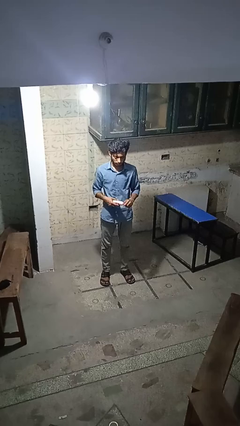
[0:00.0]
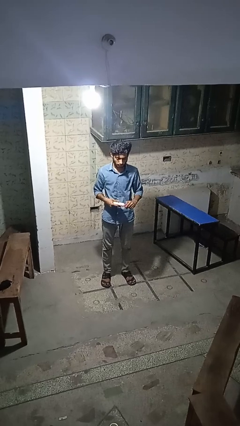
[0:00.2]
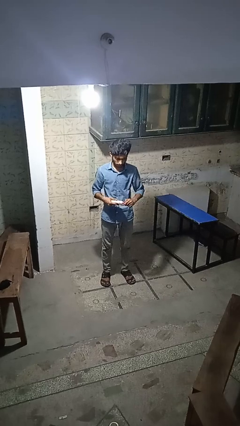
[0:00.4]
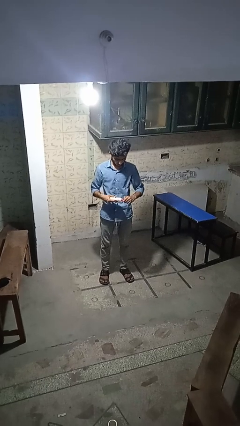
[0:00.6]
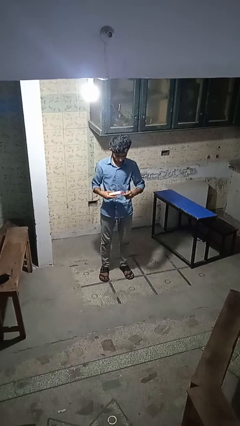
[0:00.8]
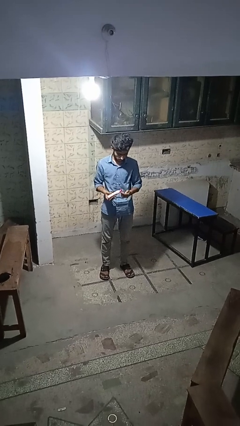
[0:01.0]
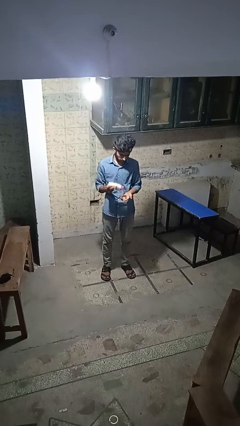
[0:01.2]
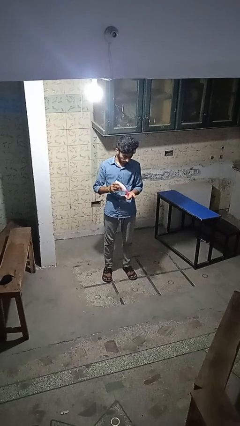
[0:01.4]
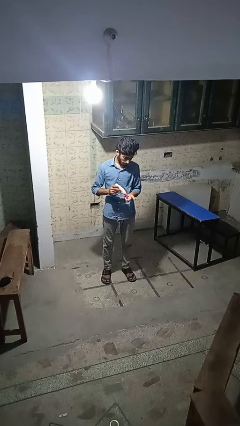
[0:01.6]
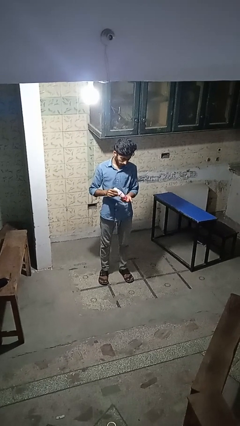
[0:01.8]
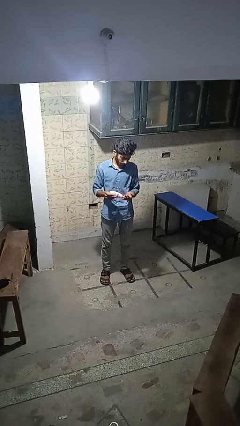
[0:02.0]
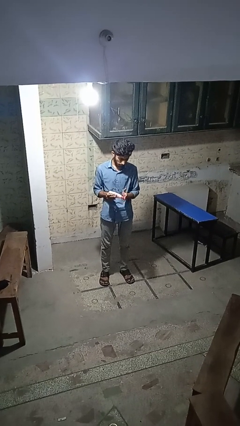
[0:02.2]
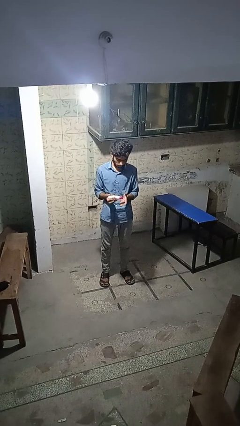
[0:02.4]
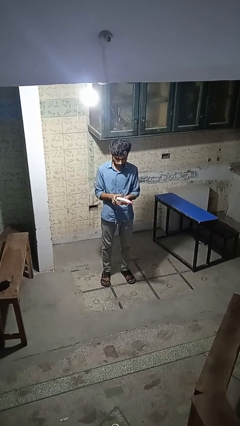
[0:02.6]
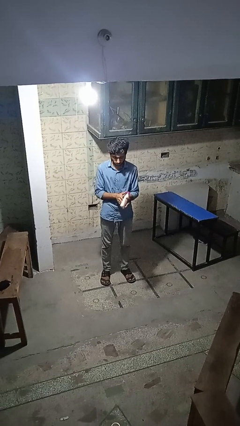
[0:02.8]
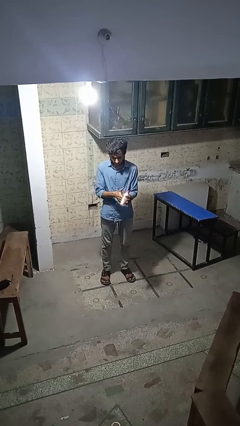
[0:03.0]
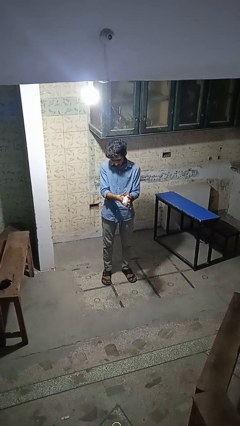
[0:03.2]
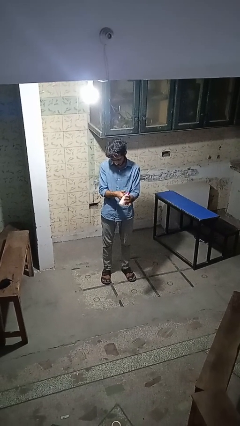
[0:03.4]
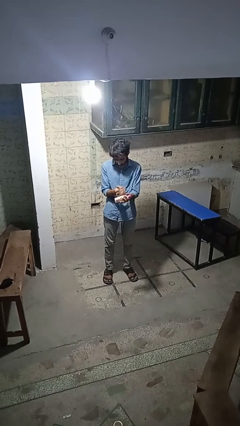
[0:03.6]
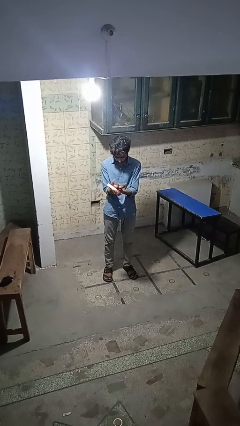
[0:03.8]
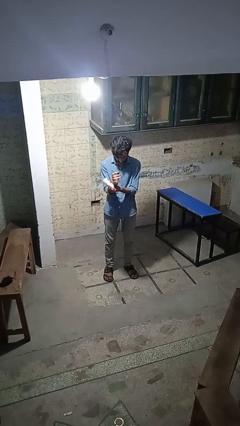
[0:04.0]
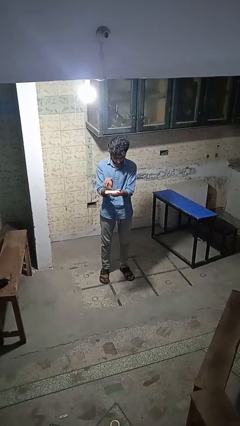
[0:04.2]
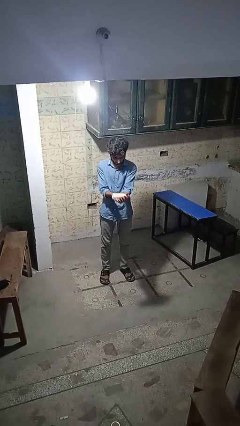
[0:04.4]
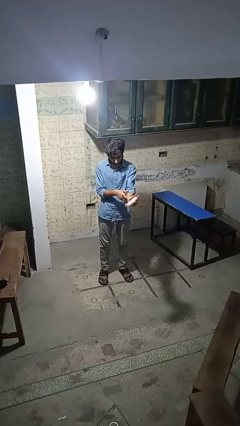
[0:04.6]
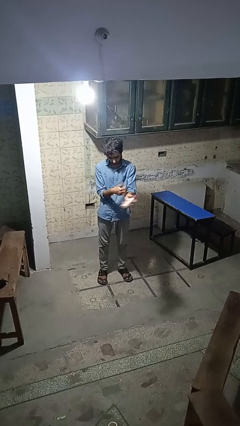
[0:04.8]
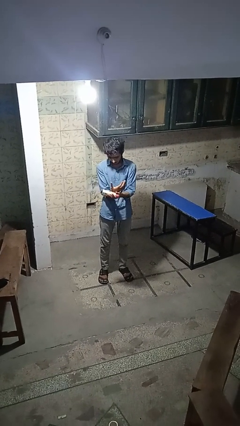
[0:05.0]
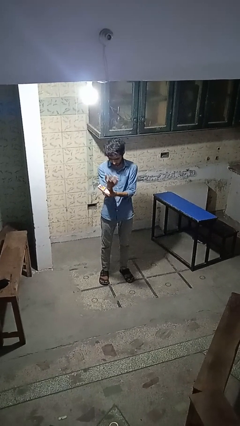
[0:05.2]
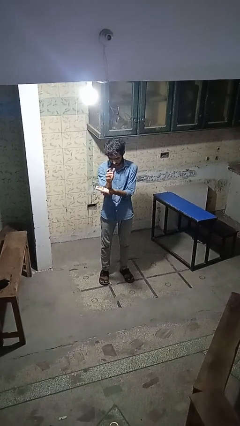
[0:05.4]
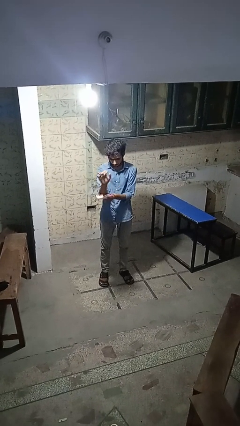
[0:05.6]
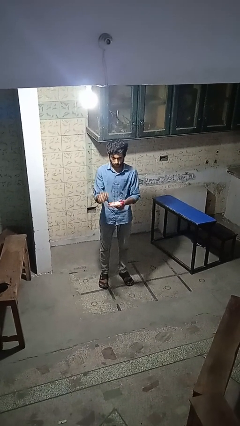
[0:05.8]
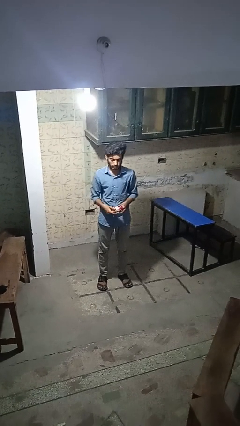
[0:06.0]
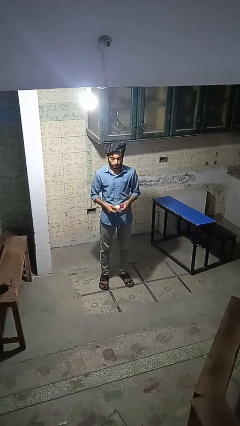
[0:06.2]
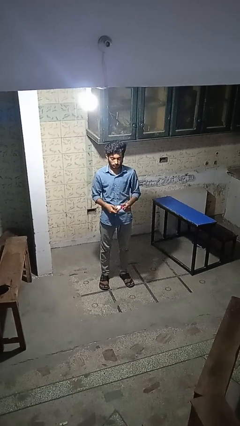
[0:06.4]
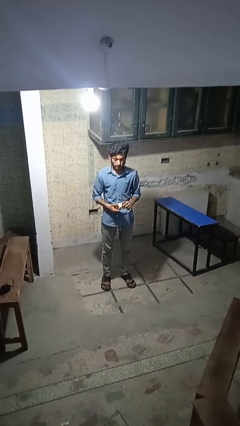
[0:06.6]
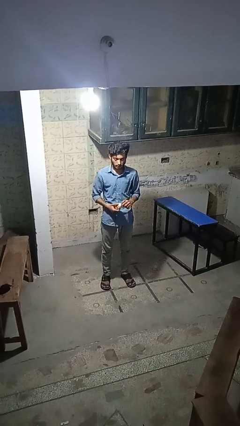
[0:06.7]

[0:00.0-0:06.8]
person applies sunscreen

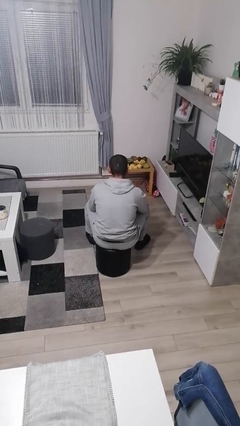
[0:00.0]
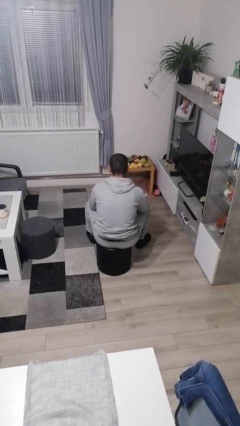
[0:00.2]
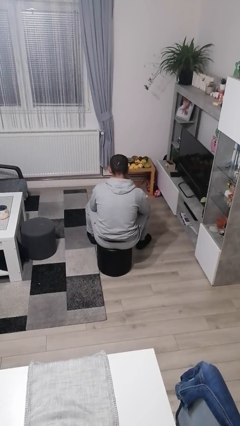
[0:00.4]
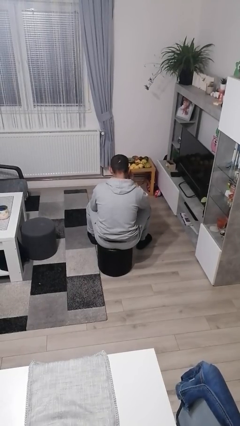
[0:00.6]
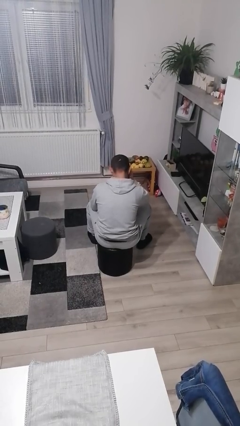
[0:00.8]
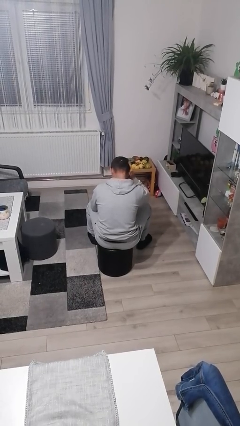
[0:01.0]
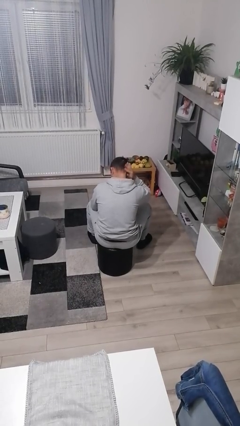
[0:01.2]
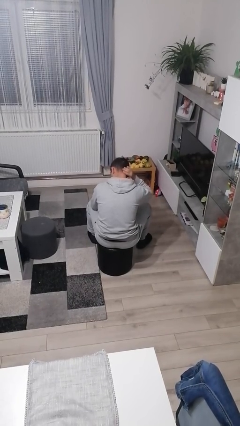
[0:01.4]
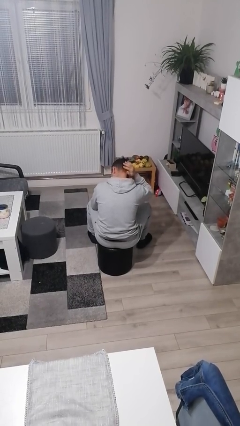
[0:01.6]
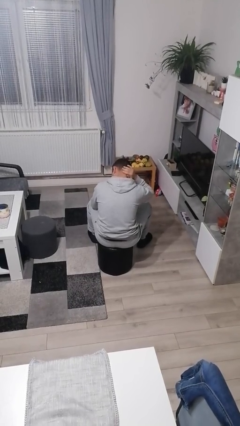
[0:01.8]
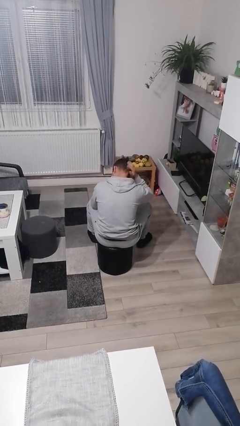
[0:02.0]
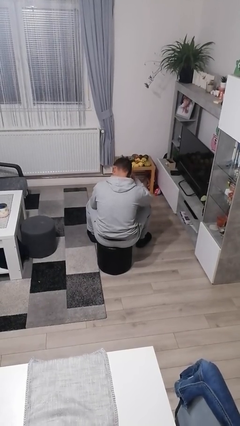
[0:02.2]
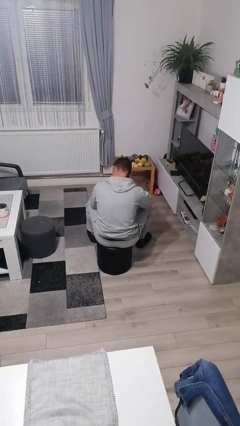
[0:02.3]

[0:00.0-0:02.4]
person strokes hair

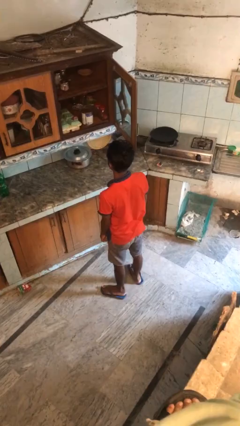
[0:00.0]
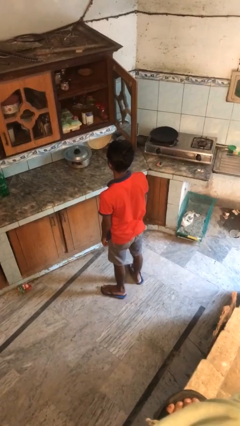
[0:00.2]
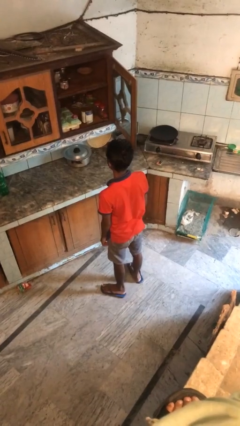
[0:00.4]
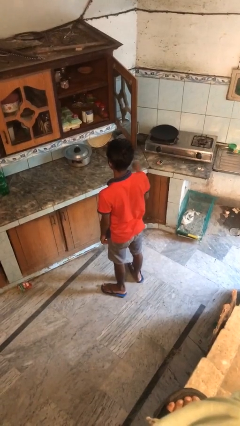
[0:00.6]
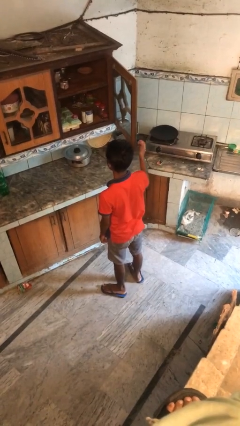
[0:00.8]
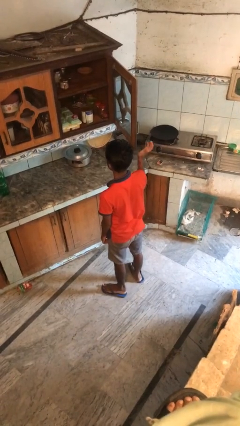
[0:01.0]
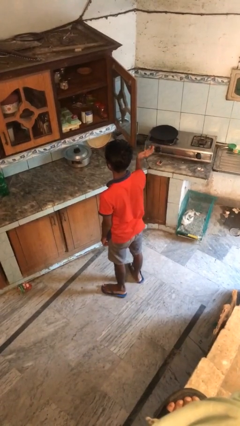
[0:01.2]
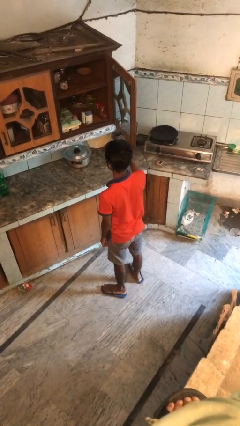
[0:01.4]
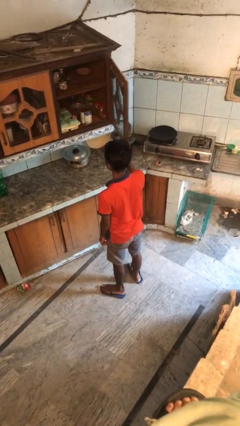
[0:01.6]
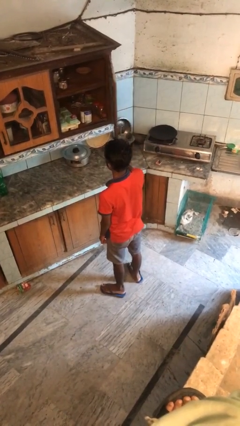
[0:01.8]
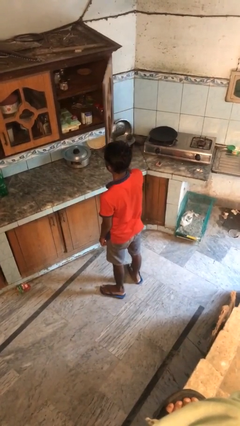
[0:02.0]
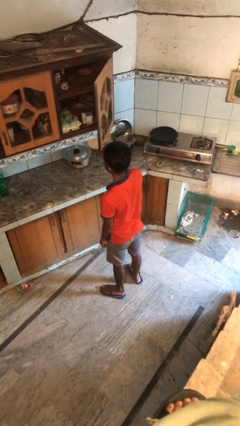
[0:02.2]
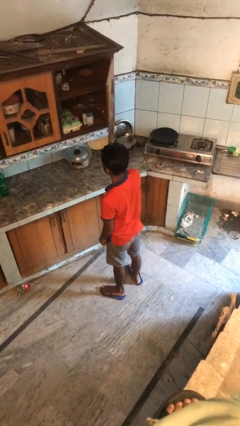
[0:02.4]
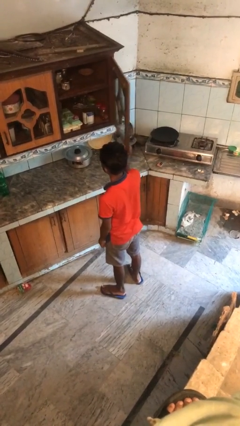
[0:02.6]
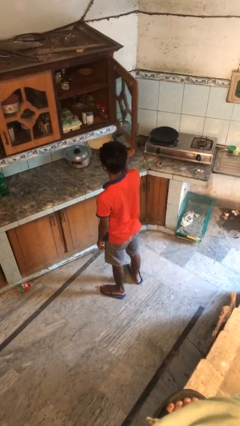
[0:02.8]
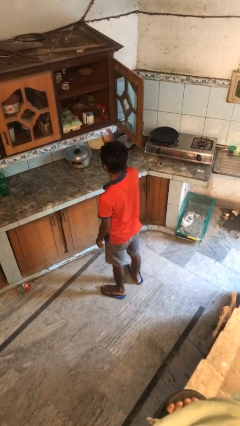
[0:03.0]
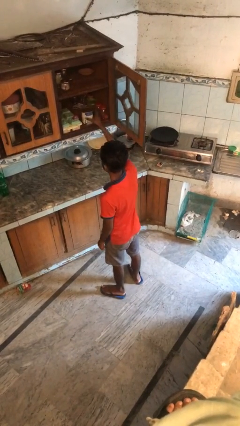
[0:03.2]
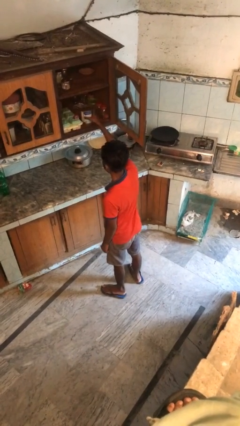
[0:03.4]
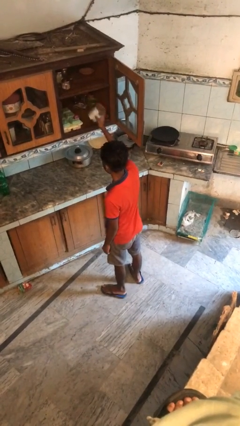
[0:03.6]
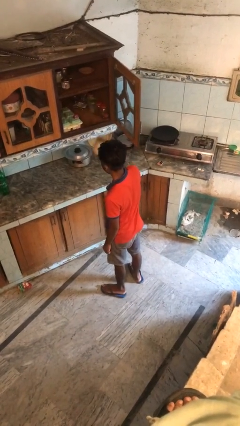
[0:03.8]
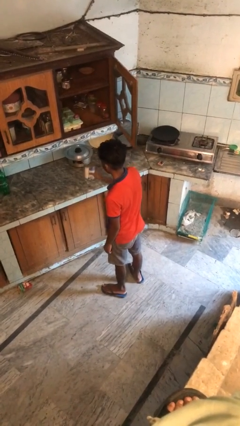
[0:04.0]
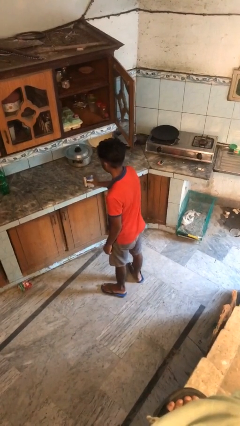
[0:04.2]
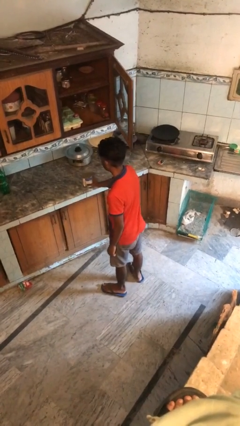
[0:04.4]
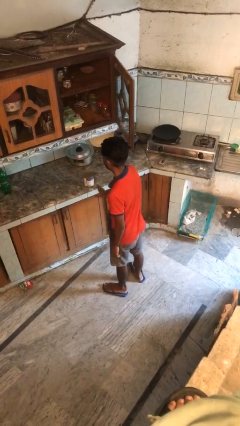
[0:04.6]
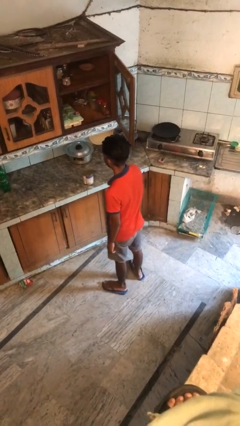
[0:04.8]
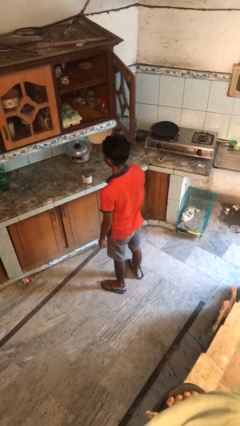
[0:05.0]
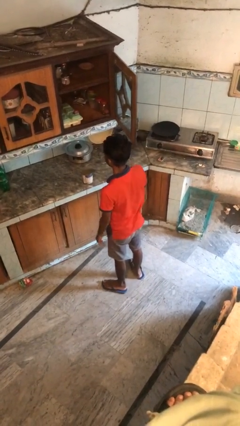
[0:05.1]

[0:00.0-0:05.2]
person takes object from cabinet

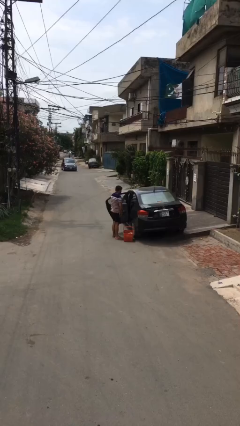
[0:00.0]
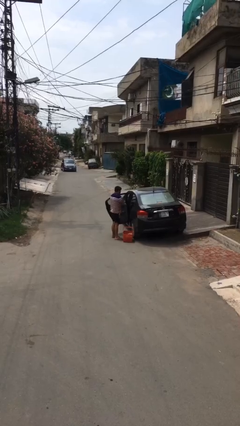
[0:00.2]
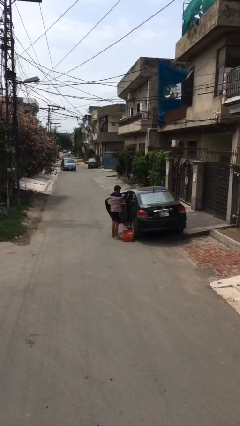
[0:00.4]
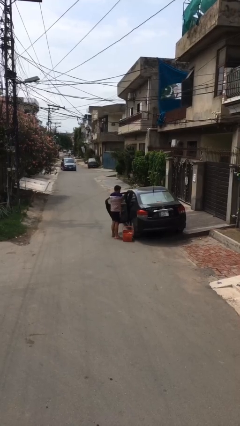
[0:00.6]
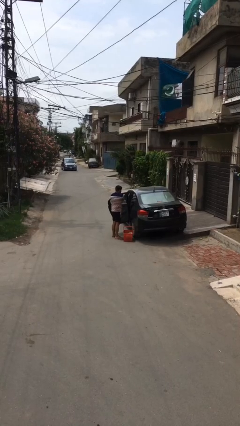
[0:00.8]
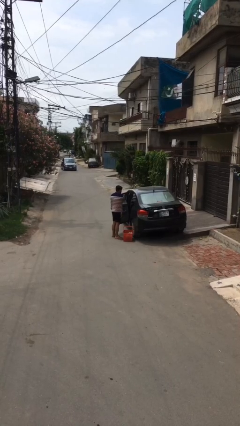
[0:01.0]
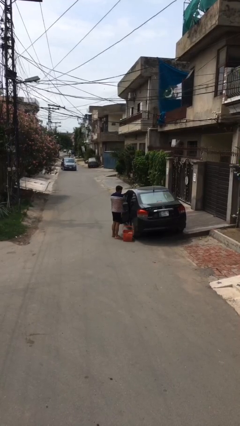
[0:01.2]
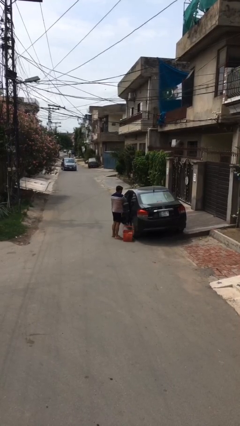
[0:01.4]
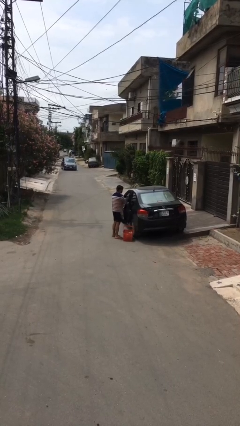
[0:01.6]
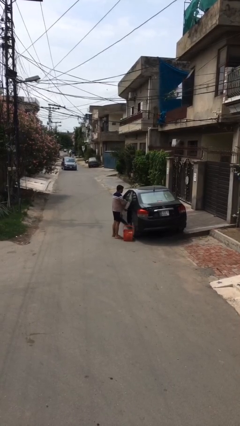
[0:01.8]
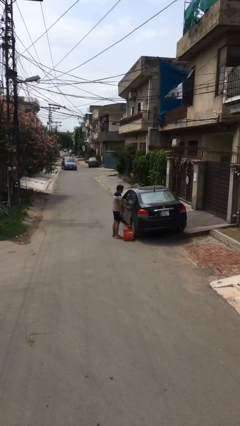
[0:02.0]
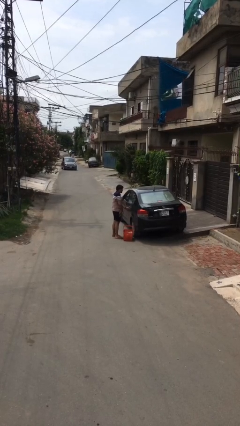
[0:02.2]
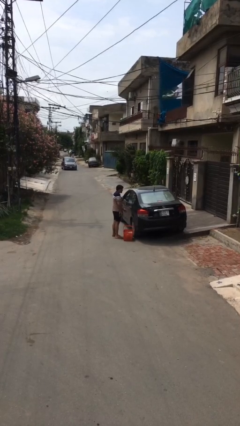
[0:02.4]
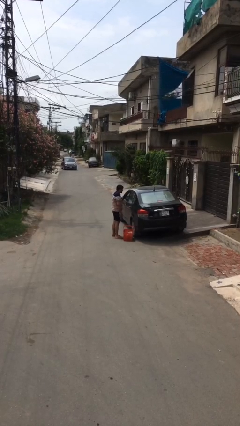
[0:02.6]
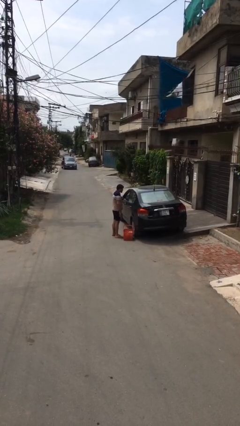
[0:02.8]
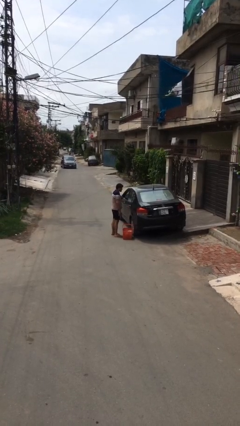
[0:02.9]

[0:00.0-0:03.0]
person closes car door

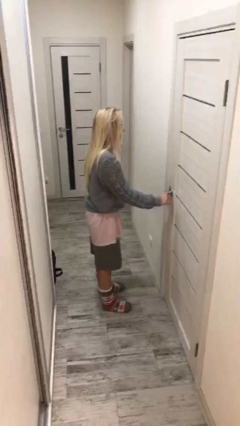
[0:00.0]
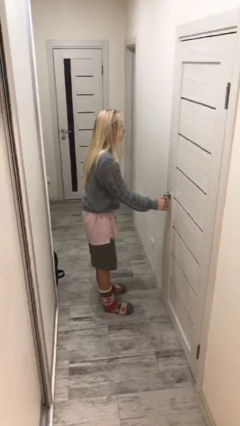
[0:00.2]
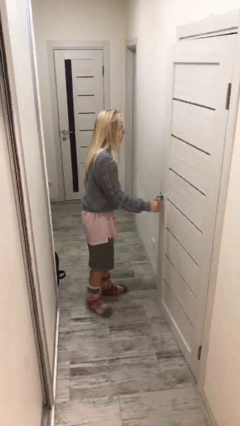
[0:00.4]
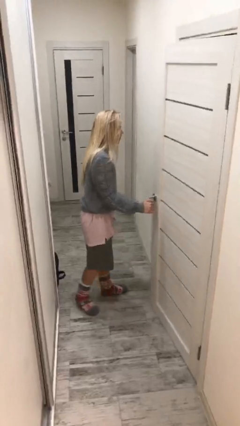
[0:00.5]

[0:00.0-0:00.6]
person opens facility door
